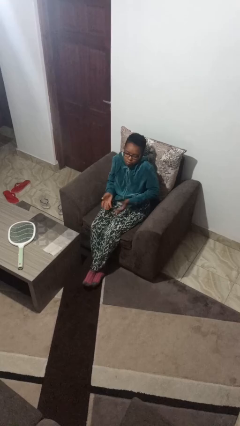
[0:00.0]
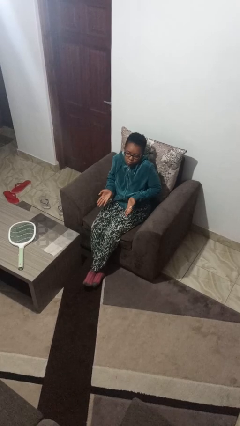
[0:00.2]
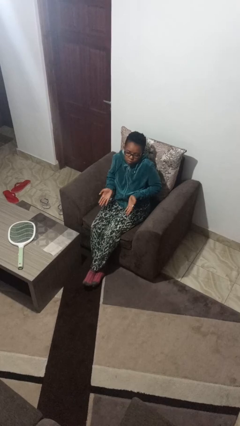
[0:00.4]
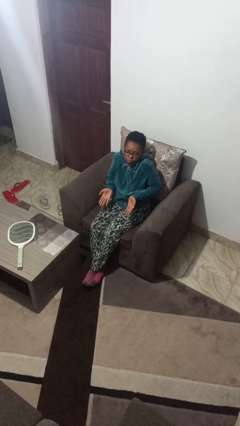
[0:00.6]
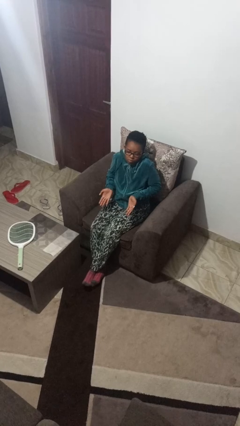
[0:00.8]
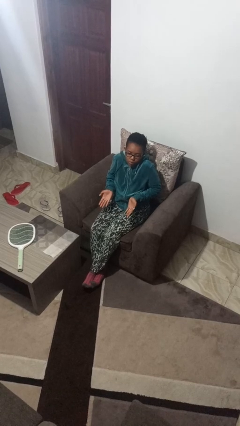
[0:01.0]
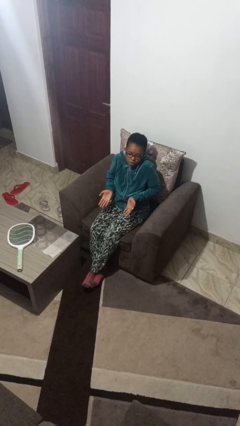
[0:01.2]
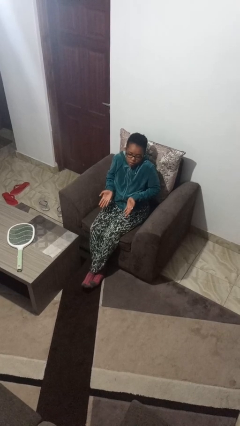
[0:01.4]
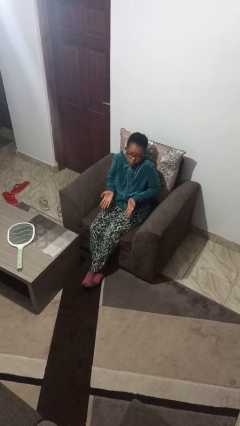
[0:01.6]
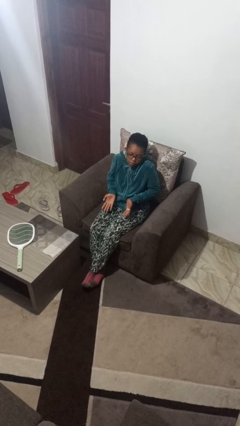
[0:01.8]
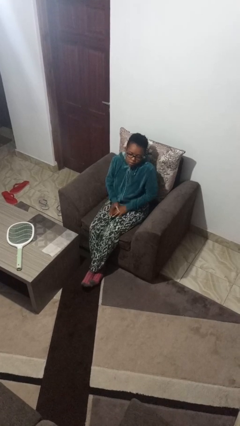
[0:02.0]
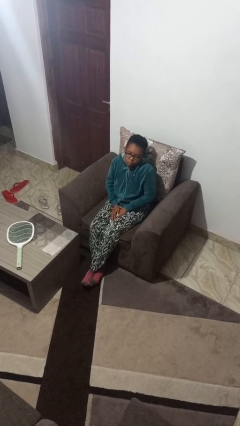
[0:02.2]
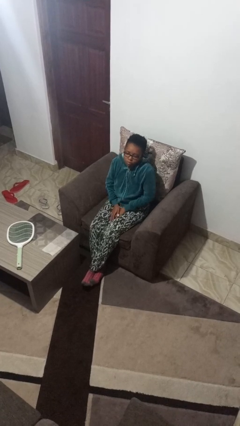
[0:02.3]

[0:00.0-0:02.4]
person shrugs

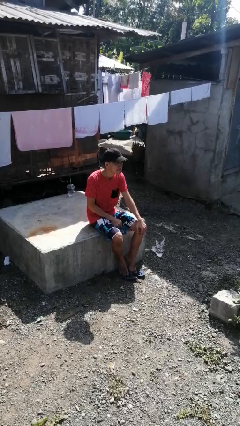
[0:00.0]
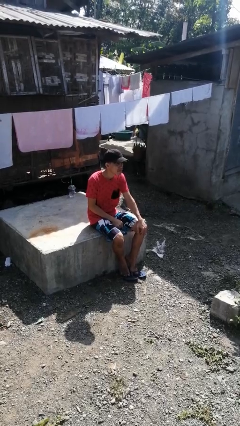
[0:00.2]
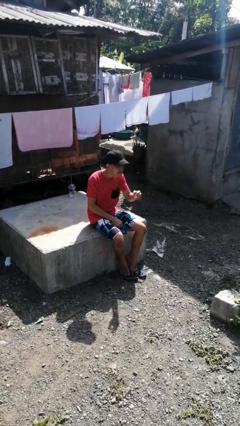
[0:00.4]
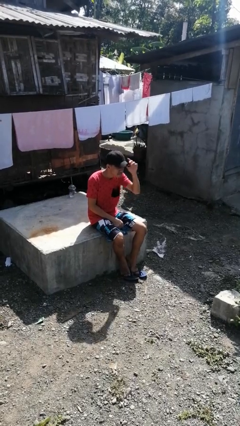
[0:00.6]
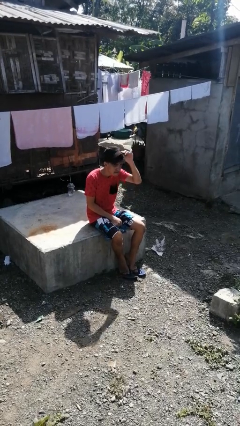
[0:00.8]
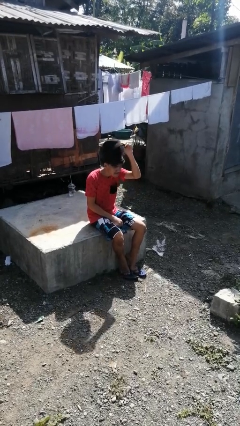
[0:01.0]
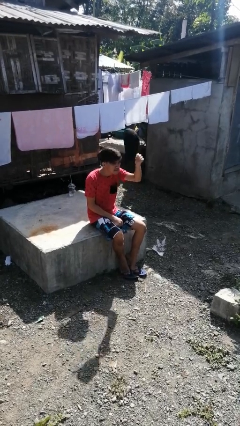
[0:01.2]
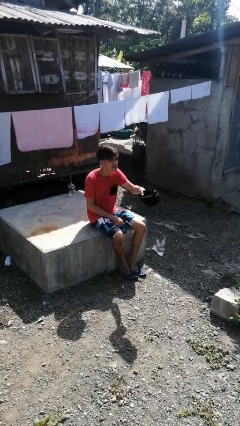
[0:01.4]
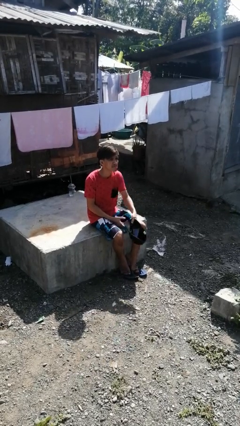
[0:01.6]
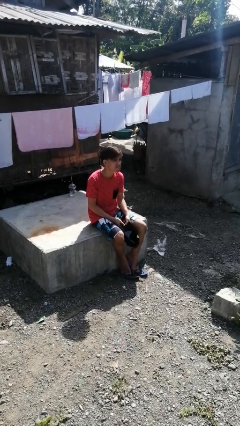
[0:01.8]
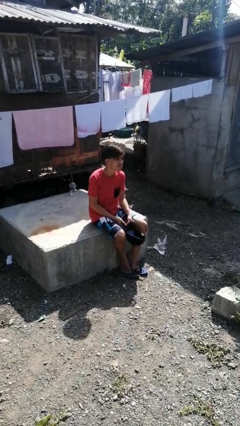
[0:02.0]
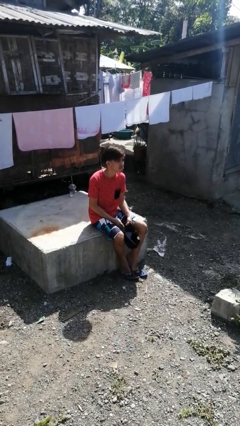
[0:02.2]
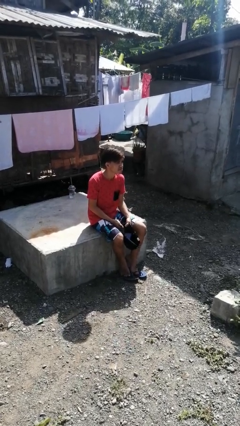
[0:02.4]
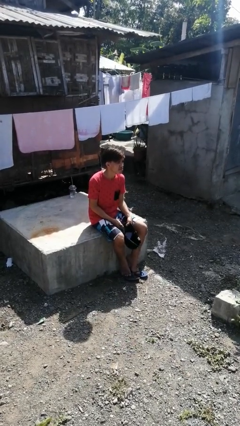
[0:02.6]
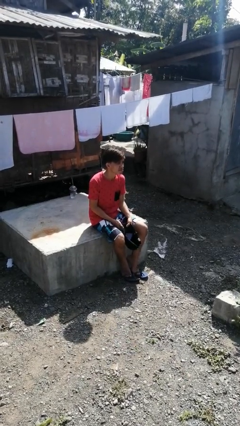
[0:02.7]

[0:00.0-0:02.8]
person takes off hat

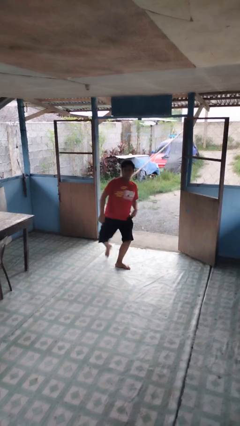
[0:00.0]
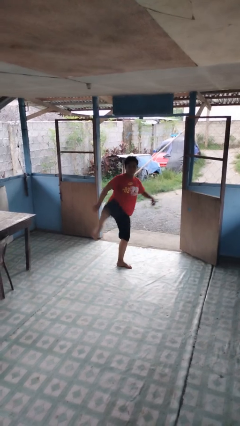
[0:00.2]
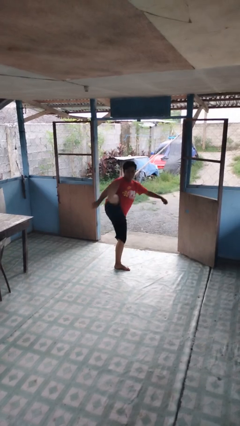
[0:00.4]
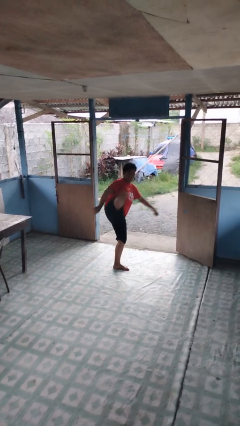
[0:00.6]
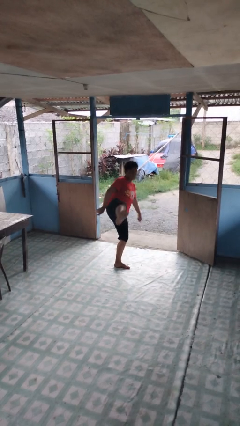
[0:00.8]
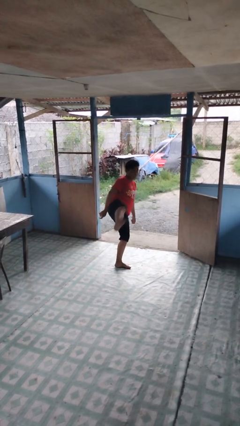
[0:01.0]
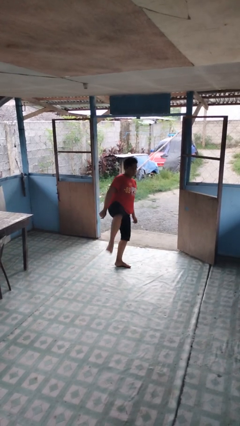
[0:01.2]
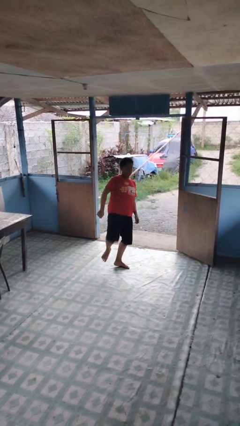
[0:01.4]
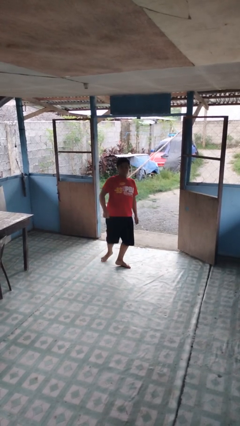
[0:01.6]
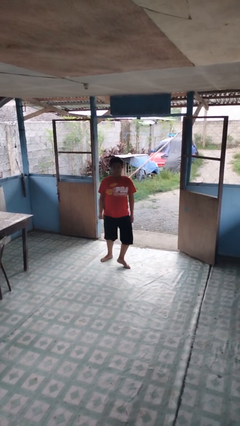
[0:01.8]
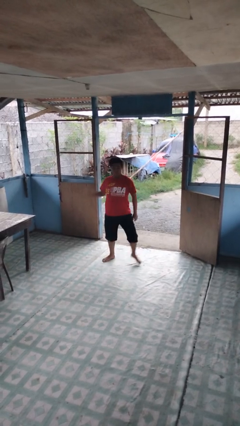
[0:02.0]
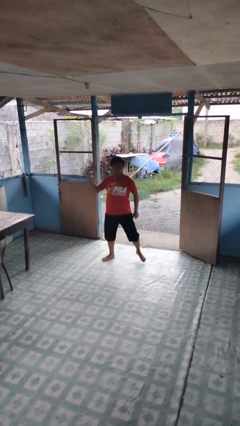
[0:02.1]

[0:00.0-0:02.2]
person karate kicks

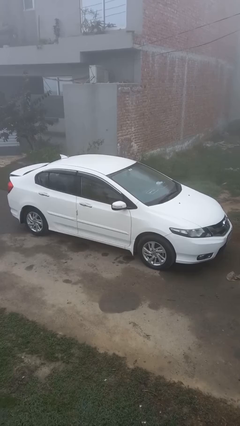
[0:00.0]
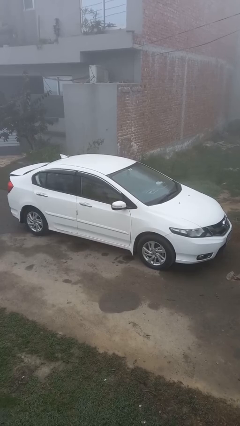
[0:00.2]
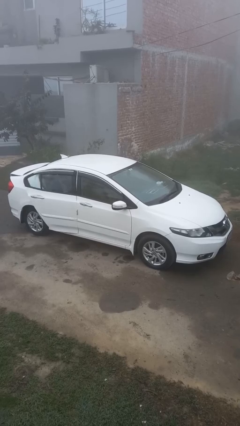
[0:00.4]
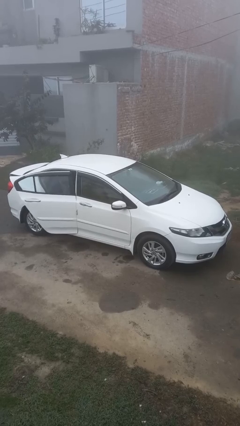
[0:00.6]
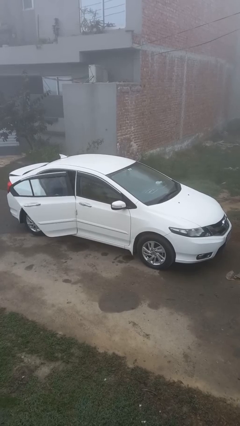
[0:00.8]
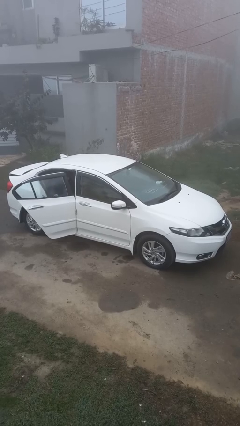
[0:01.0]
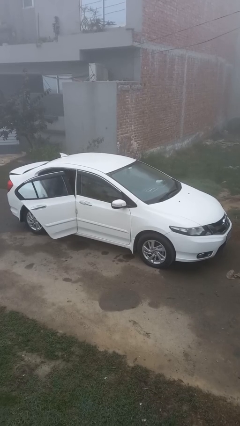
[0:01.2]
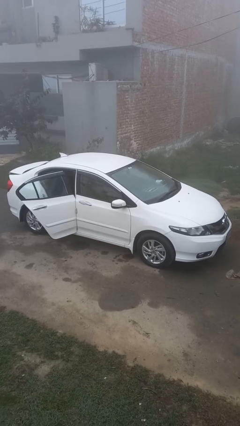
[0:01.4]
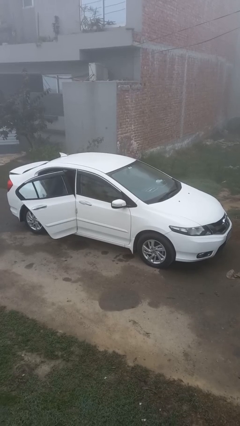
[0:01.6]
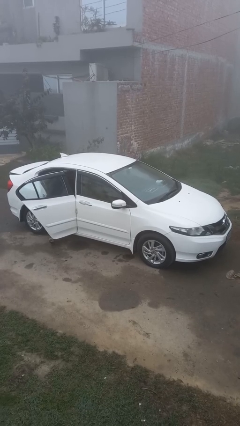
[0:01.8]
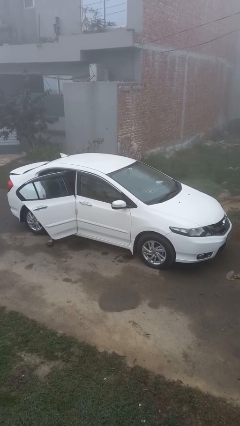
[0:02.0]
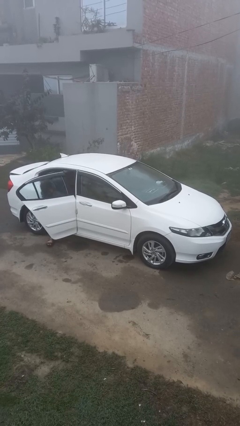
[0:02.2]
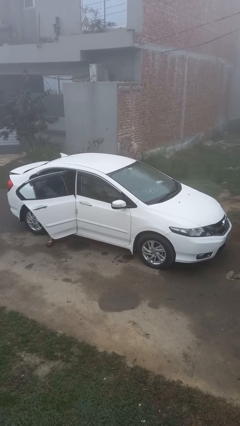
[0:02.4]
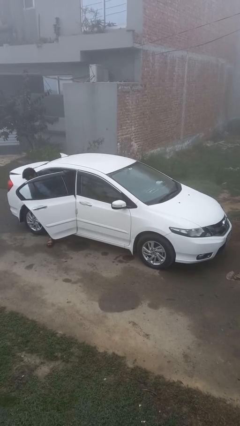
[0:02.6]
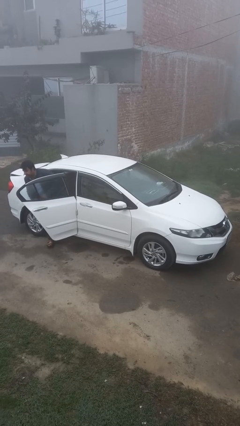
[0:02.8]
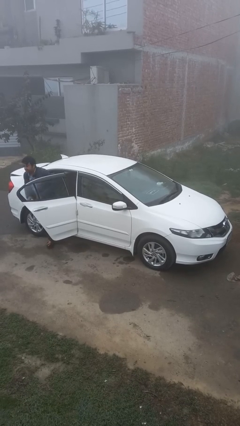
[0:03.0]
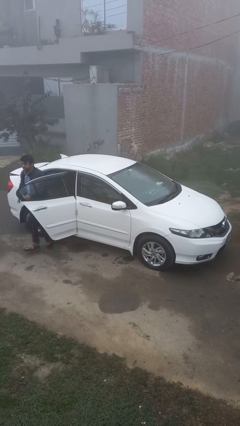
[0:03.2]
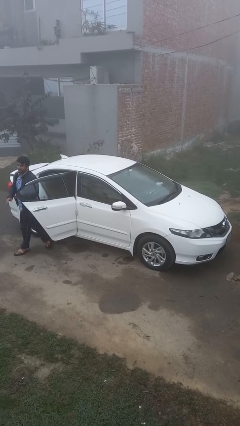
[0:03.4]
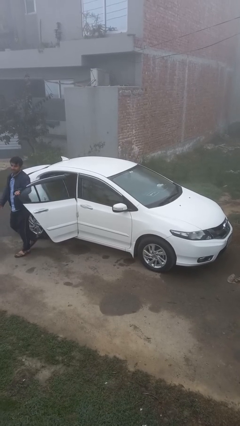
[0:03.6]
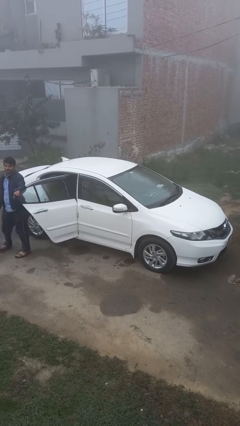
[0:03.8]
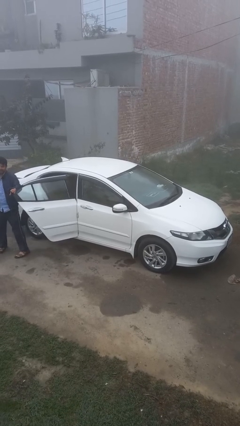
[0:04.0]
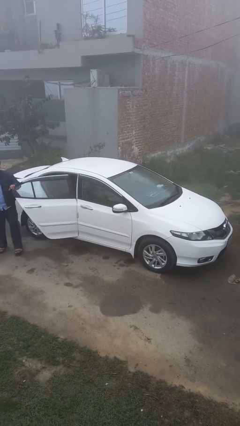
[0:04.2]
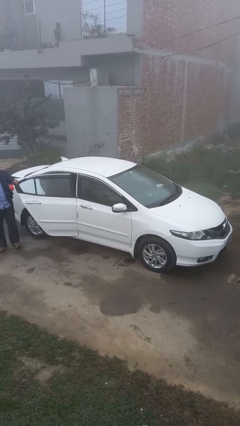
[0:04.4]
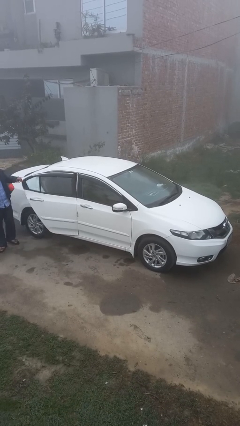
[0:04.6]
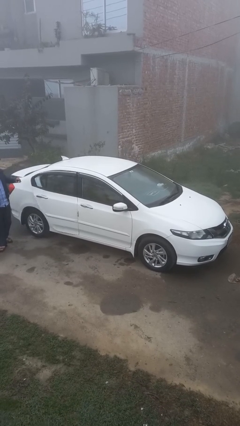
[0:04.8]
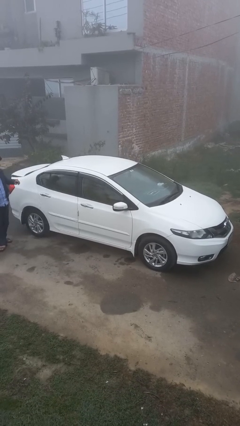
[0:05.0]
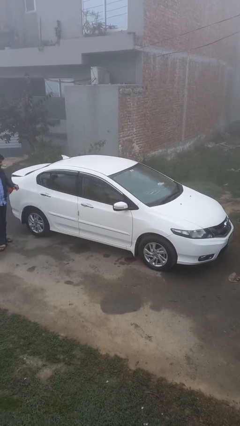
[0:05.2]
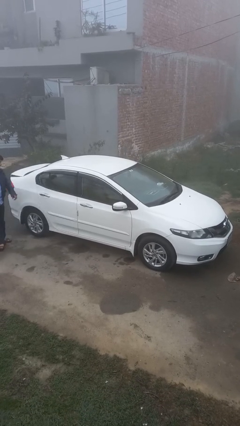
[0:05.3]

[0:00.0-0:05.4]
car drops off person

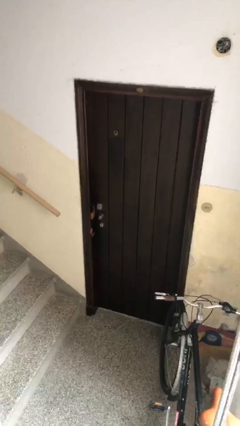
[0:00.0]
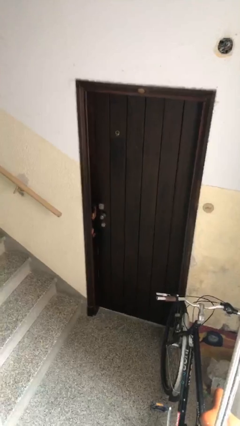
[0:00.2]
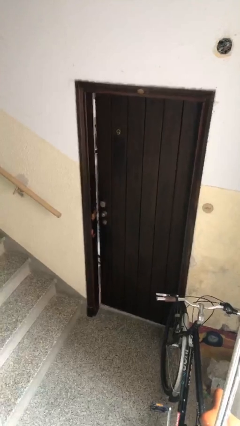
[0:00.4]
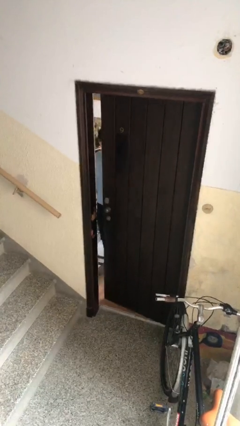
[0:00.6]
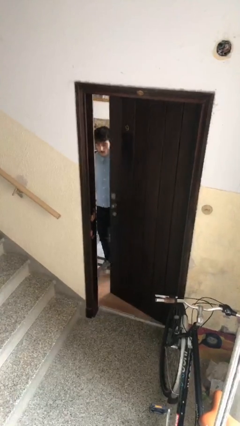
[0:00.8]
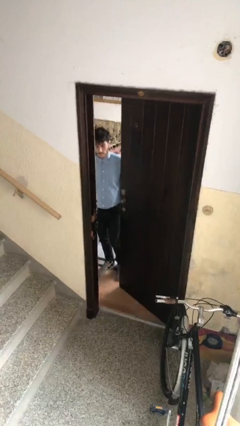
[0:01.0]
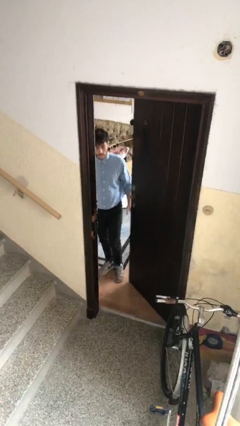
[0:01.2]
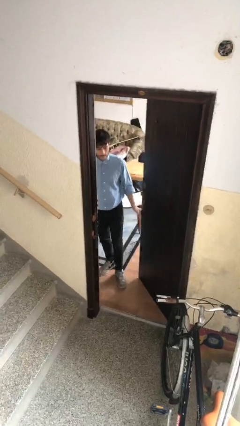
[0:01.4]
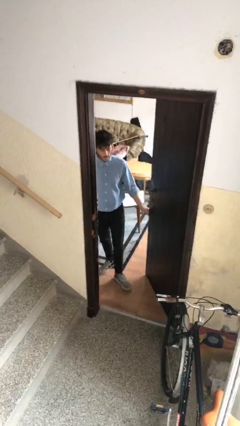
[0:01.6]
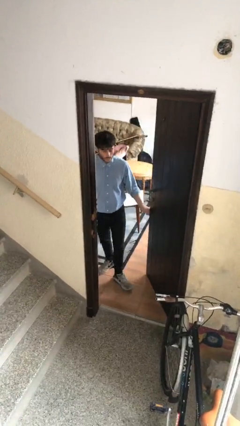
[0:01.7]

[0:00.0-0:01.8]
person opens facility door

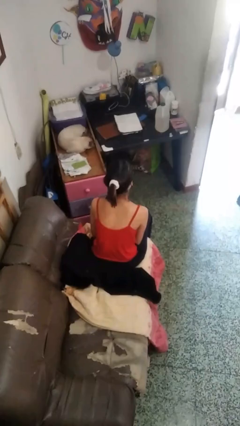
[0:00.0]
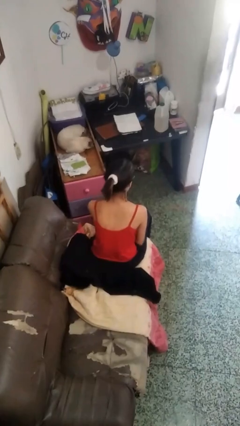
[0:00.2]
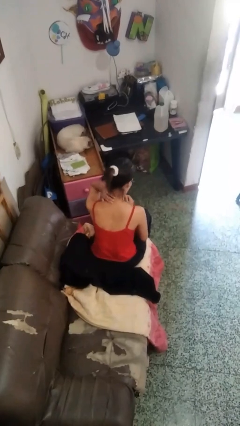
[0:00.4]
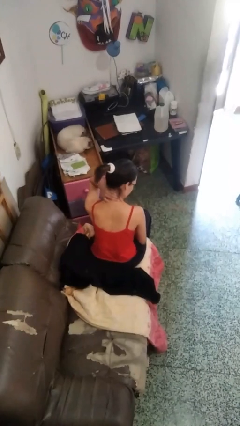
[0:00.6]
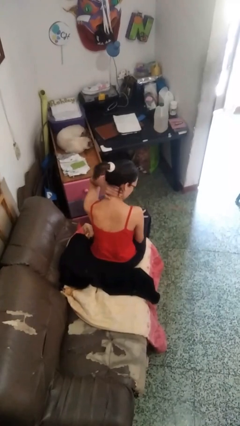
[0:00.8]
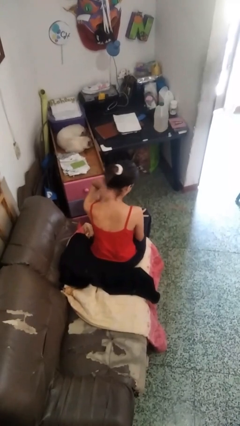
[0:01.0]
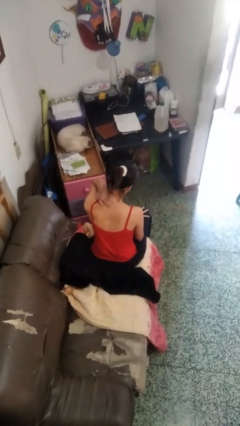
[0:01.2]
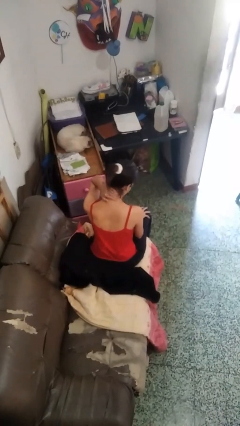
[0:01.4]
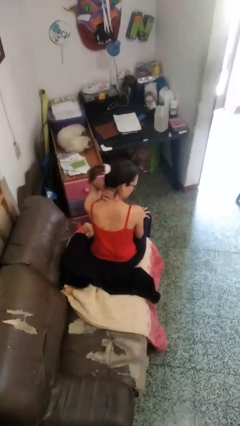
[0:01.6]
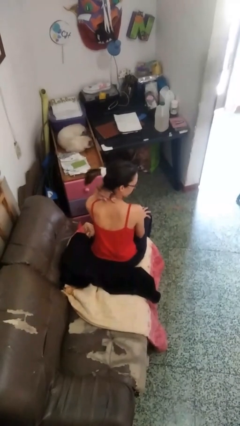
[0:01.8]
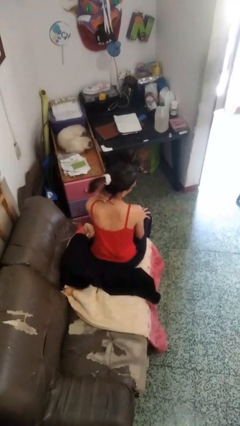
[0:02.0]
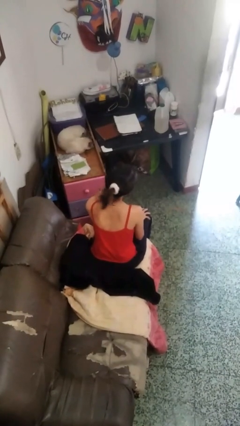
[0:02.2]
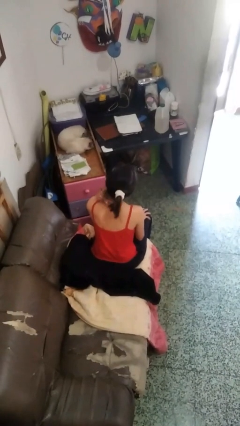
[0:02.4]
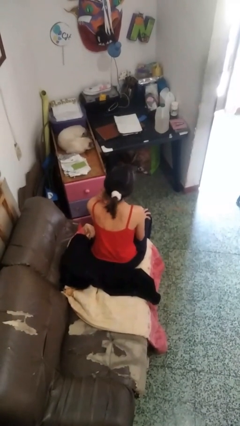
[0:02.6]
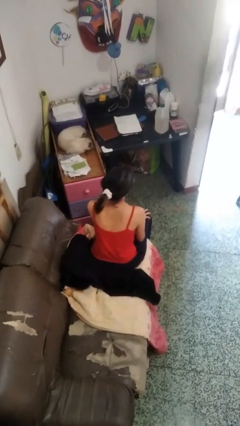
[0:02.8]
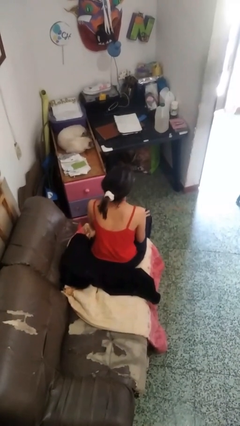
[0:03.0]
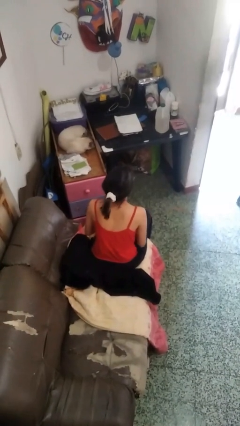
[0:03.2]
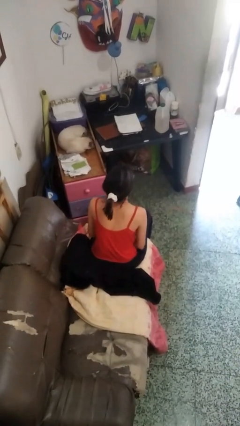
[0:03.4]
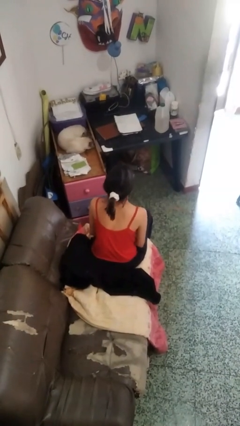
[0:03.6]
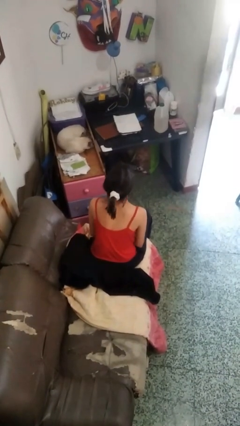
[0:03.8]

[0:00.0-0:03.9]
person rubs neck
